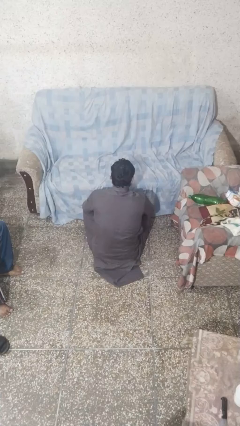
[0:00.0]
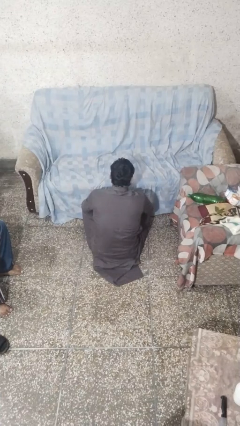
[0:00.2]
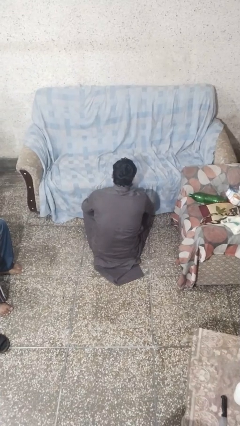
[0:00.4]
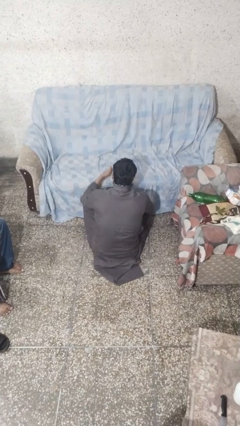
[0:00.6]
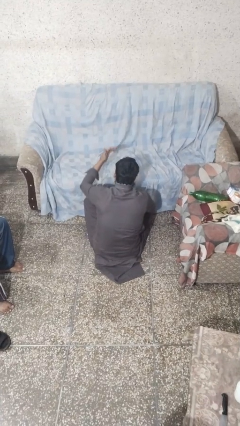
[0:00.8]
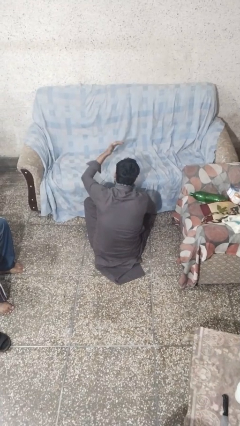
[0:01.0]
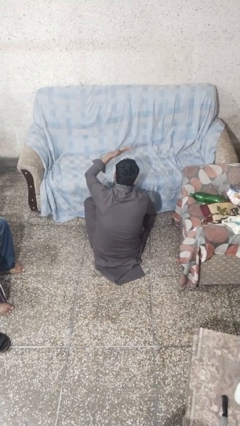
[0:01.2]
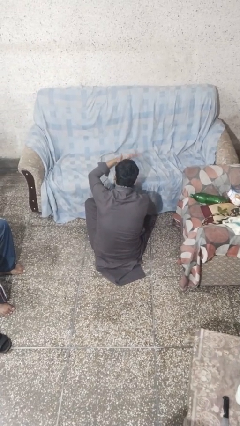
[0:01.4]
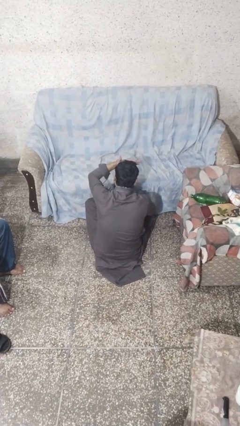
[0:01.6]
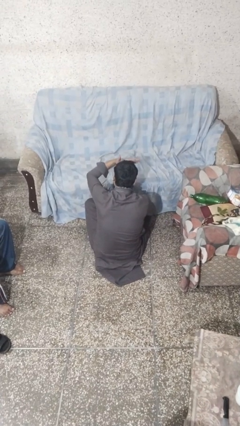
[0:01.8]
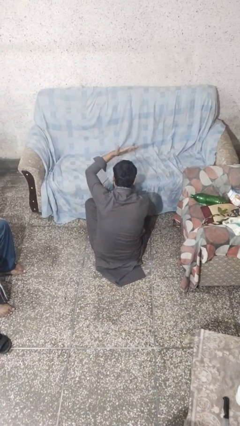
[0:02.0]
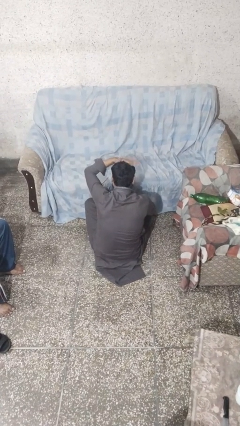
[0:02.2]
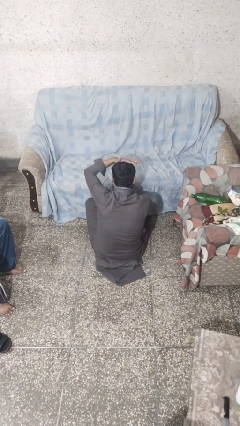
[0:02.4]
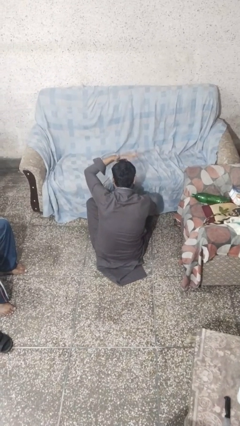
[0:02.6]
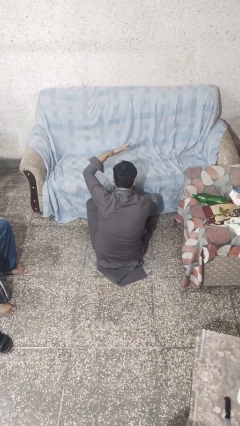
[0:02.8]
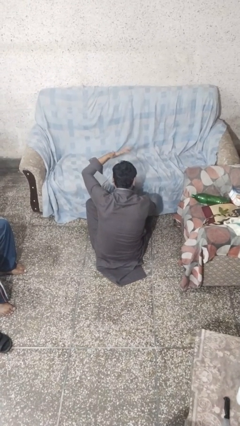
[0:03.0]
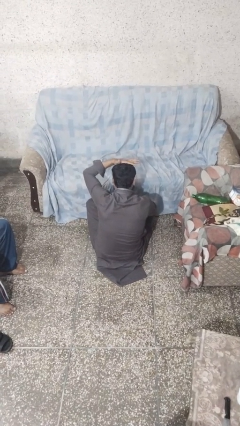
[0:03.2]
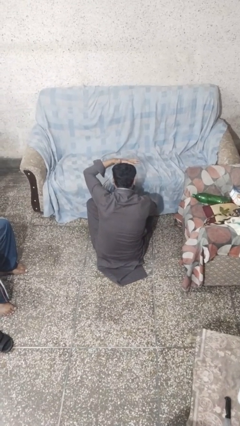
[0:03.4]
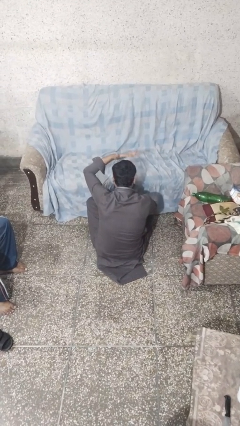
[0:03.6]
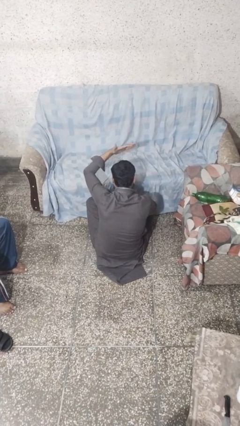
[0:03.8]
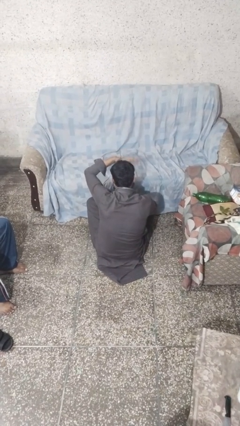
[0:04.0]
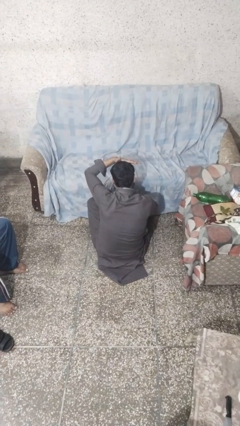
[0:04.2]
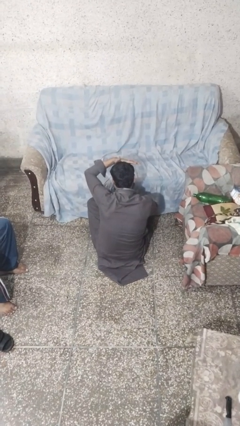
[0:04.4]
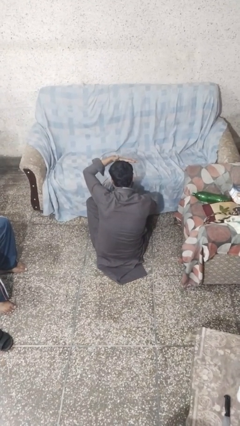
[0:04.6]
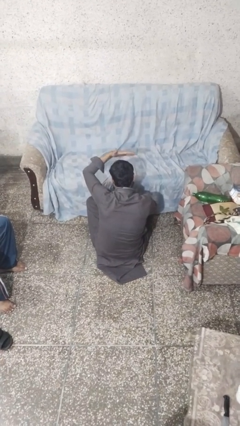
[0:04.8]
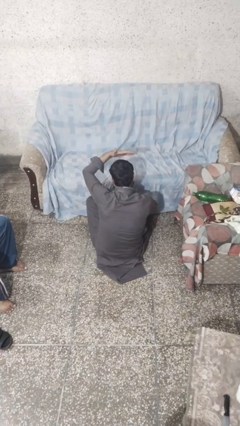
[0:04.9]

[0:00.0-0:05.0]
person pats head

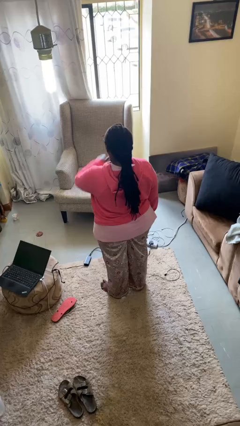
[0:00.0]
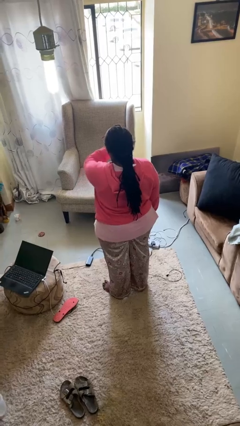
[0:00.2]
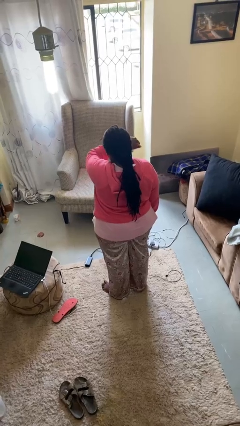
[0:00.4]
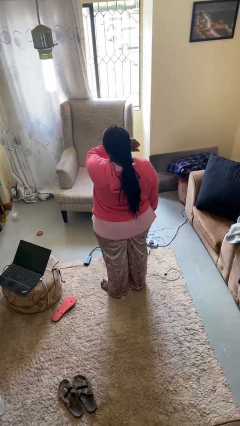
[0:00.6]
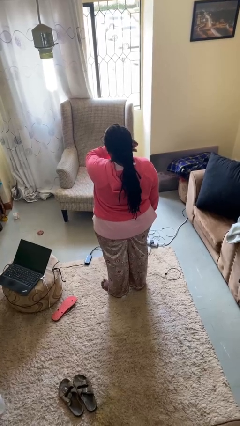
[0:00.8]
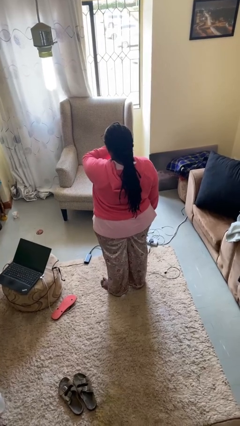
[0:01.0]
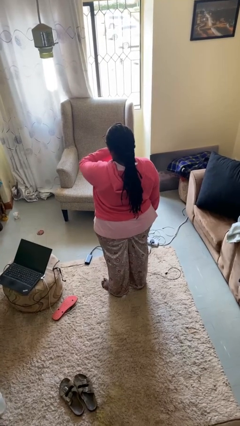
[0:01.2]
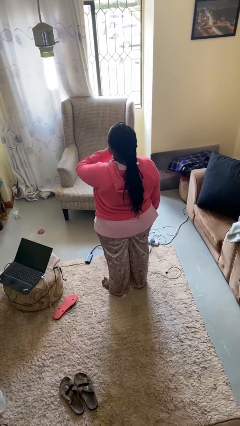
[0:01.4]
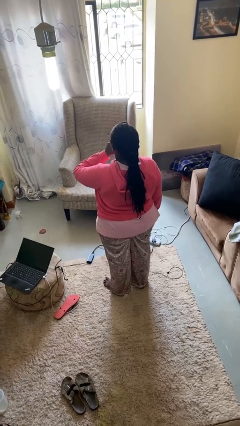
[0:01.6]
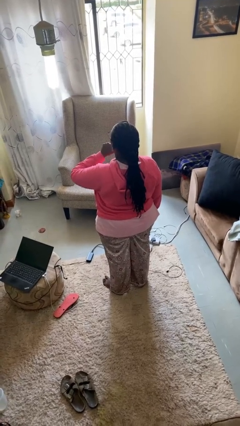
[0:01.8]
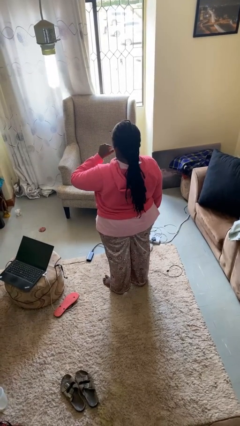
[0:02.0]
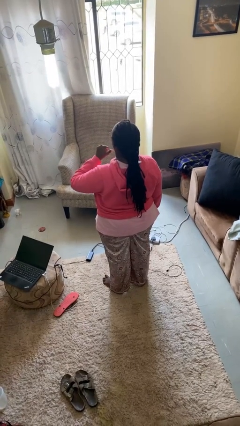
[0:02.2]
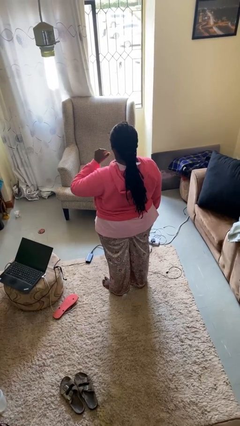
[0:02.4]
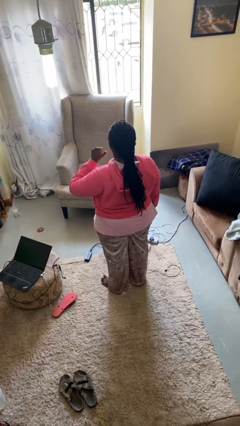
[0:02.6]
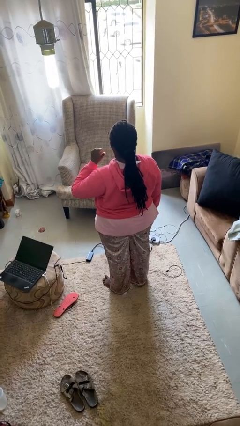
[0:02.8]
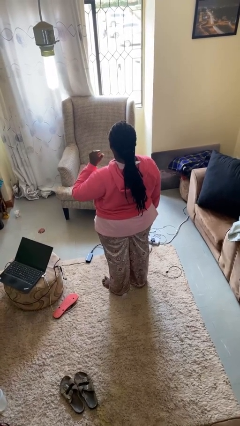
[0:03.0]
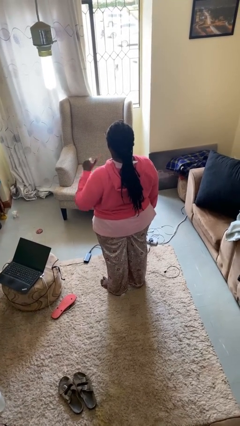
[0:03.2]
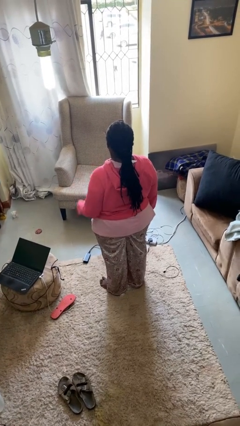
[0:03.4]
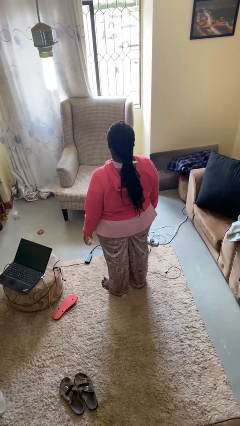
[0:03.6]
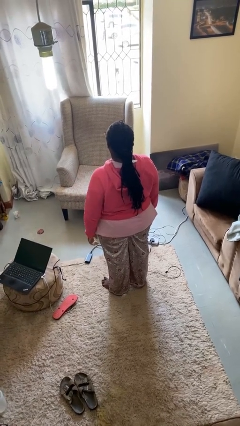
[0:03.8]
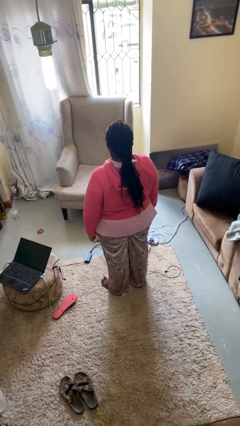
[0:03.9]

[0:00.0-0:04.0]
person gestures cut

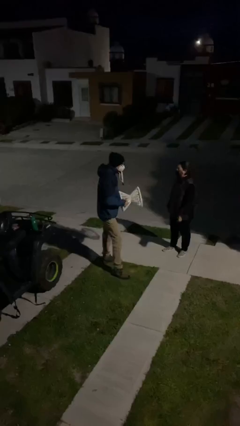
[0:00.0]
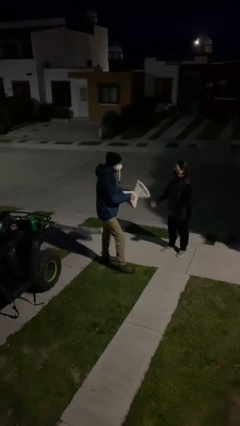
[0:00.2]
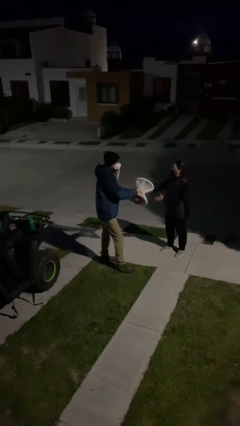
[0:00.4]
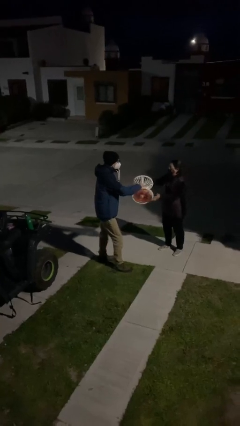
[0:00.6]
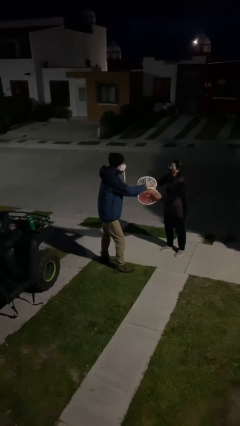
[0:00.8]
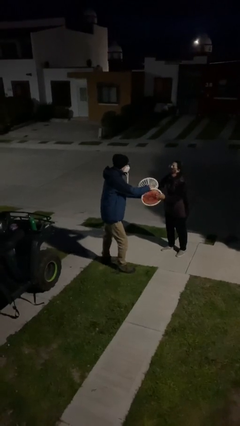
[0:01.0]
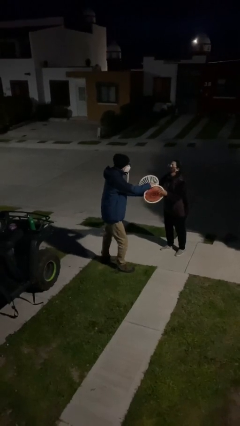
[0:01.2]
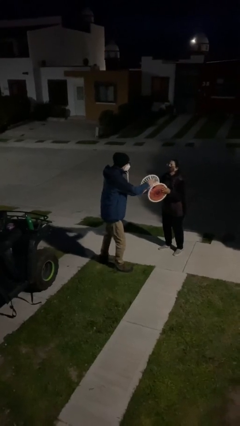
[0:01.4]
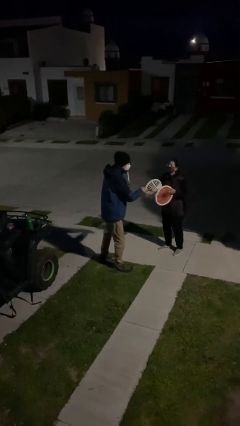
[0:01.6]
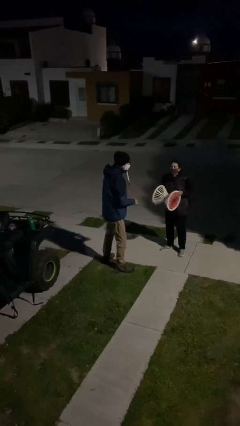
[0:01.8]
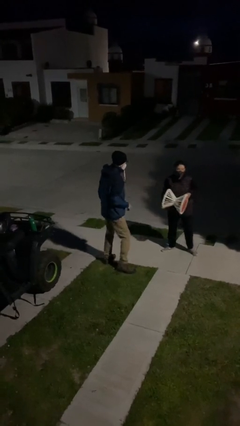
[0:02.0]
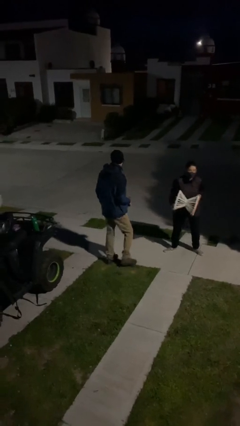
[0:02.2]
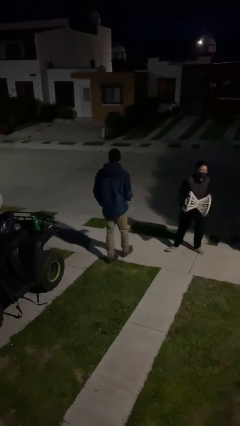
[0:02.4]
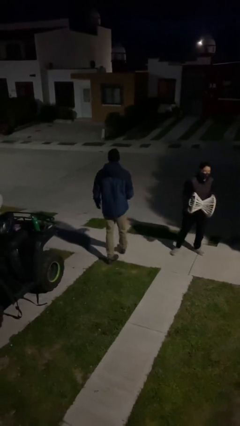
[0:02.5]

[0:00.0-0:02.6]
person transfers object to person

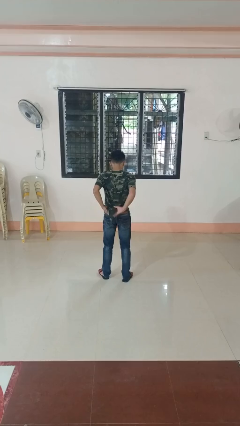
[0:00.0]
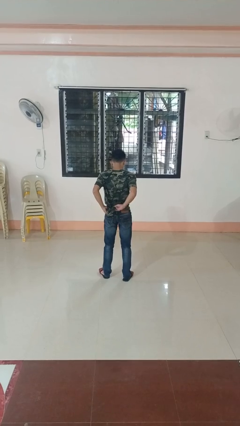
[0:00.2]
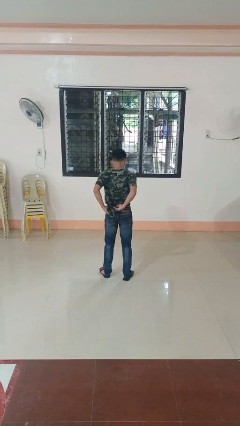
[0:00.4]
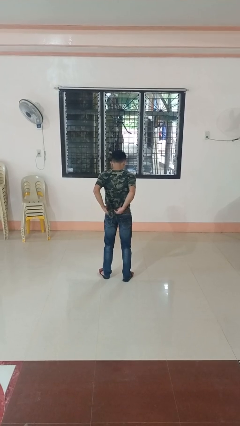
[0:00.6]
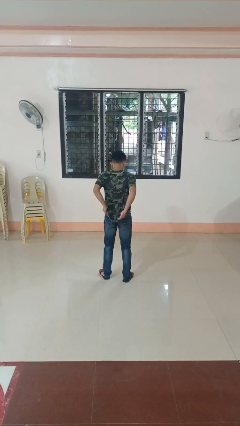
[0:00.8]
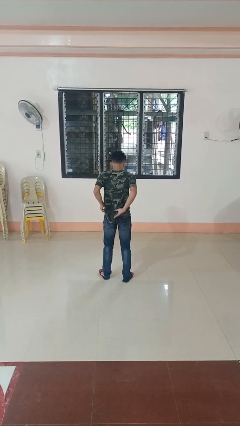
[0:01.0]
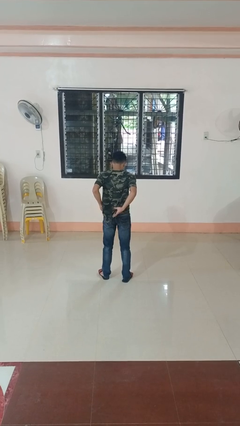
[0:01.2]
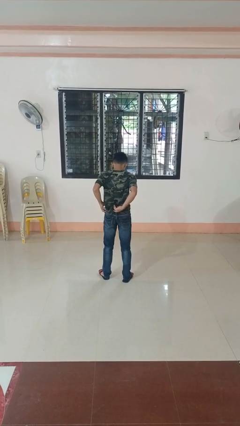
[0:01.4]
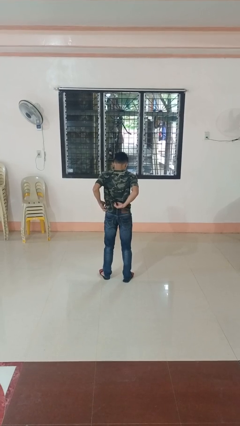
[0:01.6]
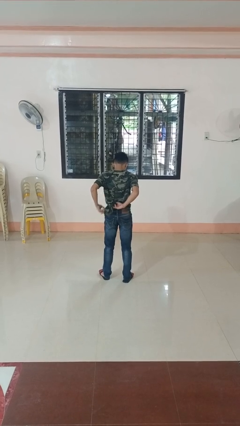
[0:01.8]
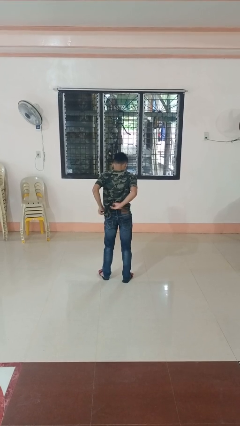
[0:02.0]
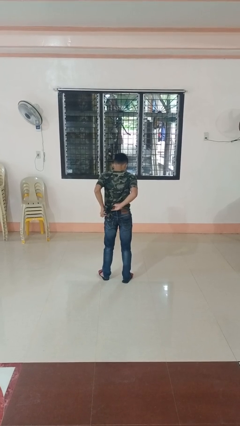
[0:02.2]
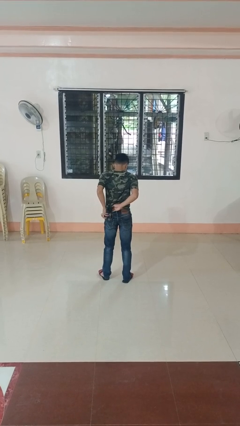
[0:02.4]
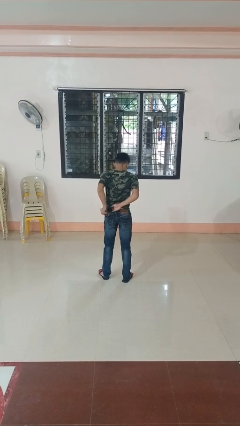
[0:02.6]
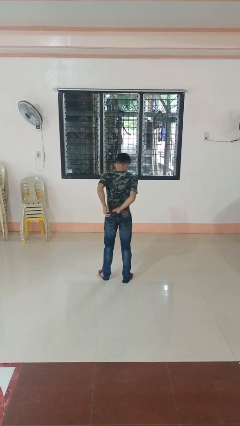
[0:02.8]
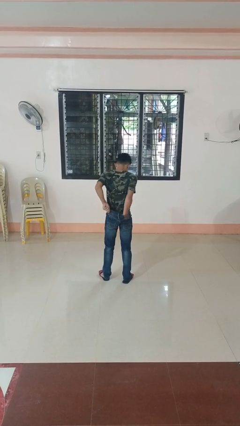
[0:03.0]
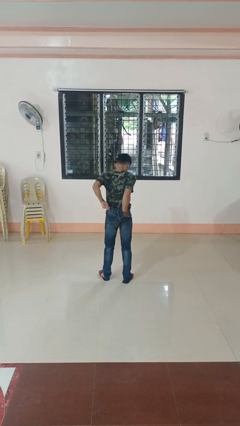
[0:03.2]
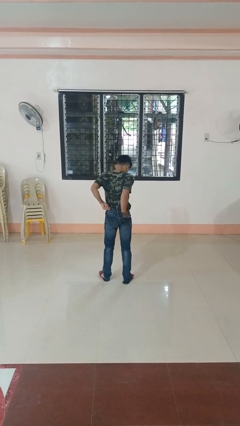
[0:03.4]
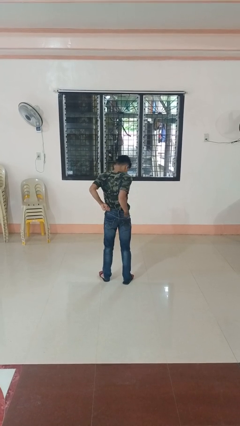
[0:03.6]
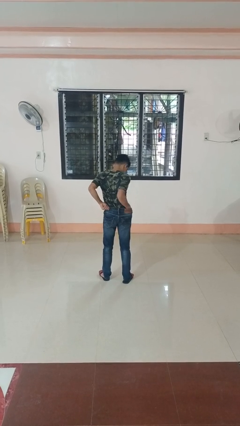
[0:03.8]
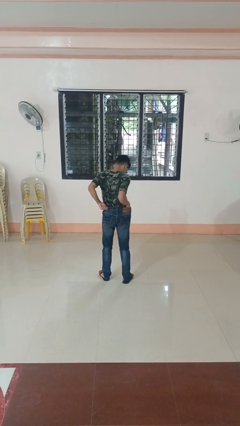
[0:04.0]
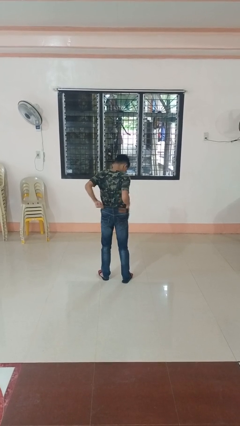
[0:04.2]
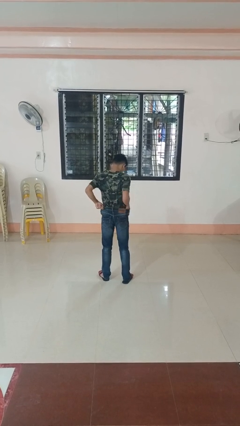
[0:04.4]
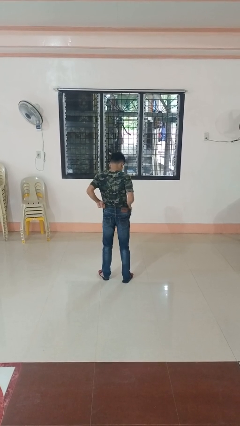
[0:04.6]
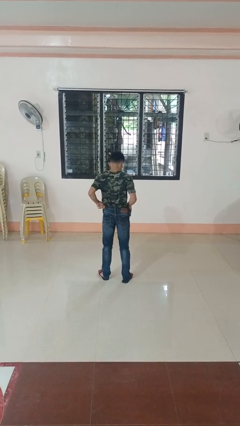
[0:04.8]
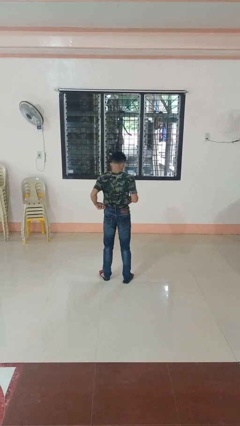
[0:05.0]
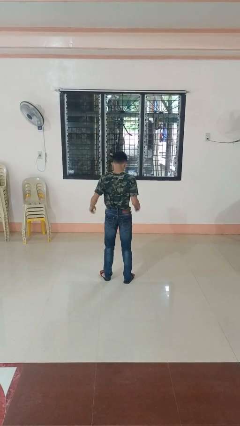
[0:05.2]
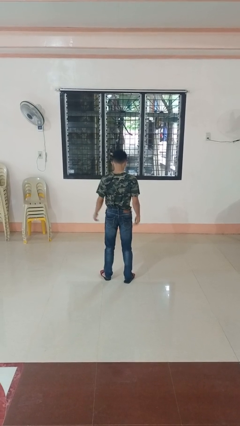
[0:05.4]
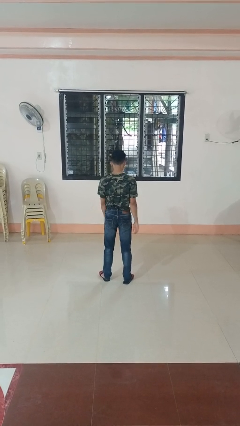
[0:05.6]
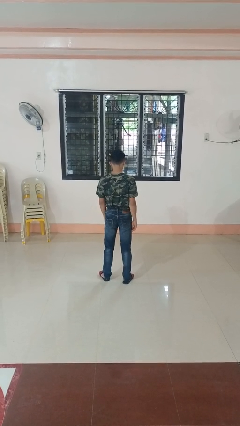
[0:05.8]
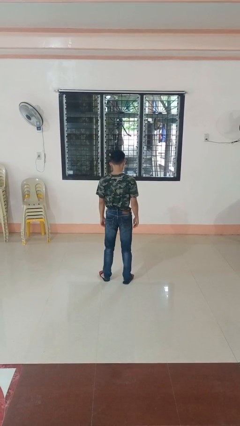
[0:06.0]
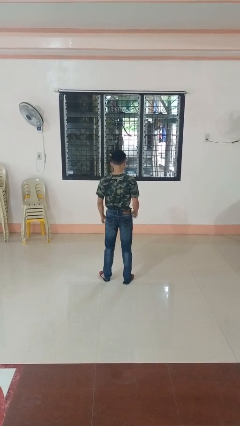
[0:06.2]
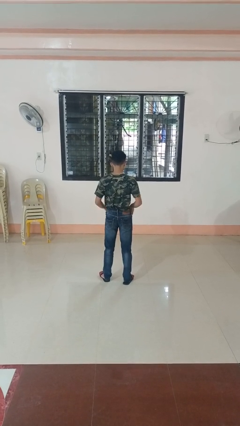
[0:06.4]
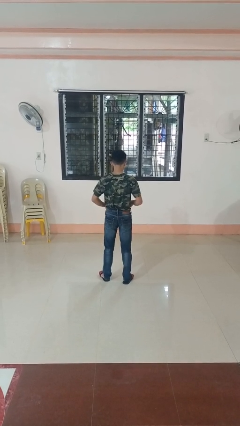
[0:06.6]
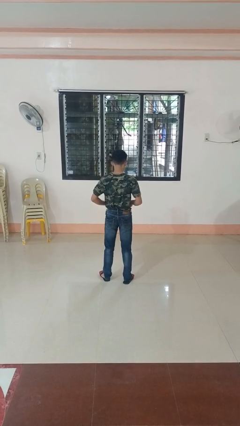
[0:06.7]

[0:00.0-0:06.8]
person tucks in shirt
